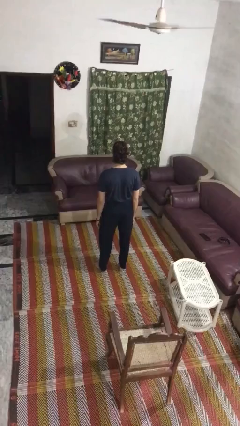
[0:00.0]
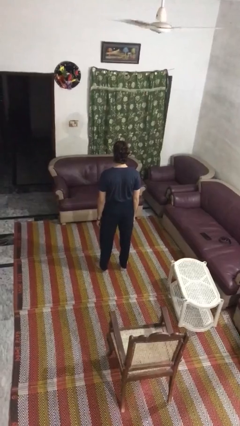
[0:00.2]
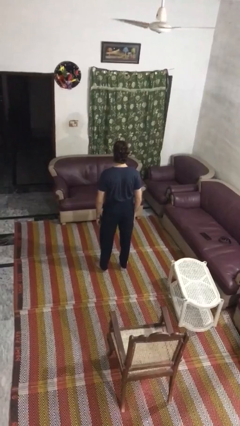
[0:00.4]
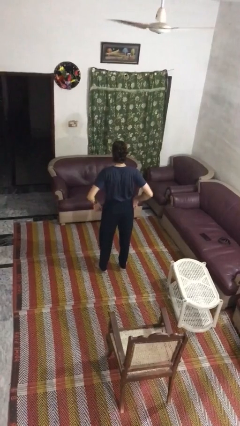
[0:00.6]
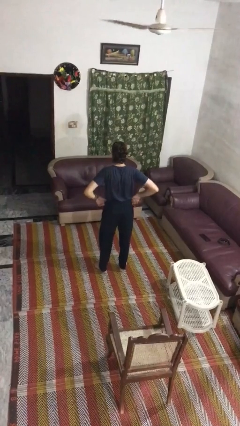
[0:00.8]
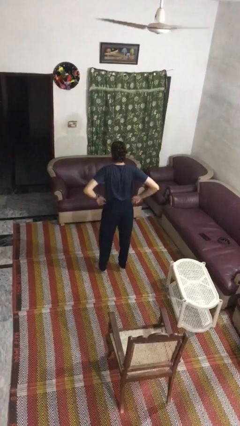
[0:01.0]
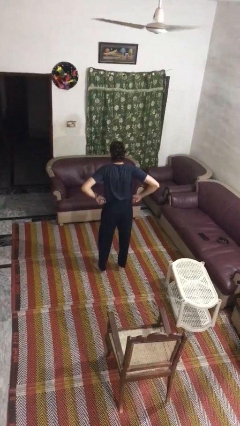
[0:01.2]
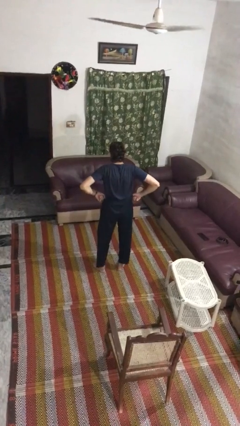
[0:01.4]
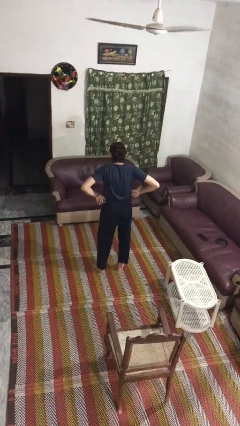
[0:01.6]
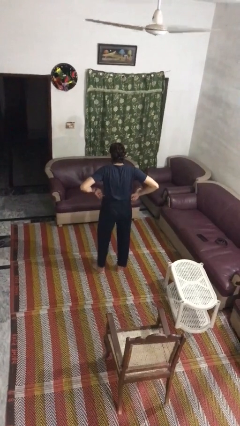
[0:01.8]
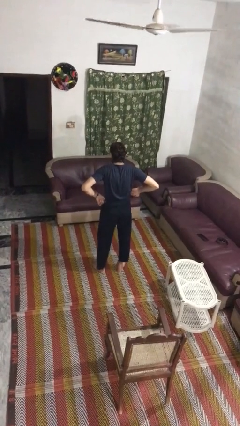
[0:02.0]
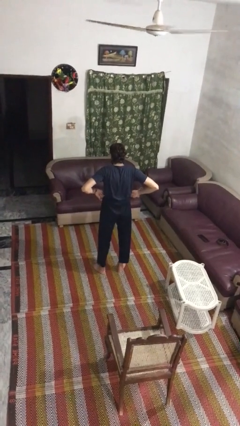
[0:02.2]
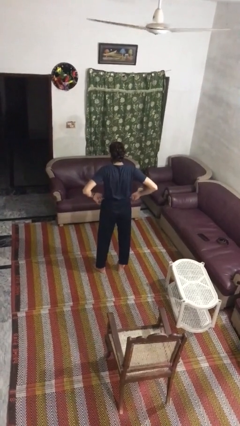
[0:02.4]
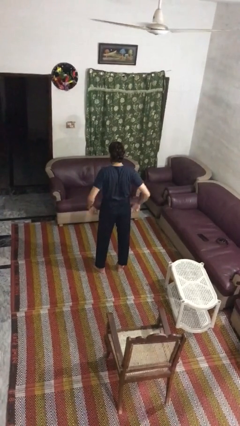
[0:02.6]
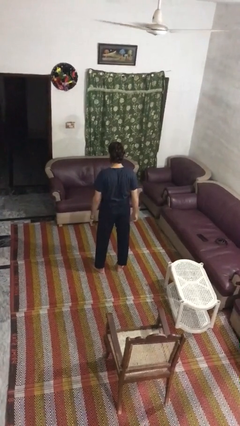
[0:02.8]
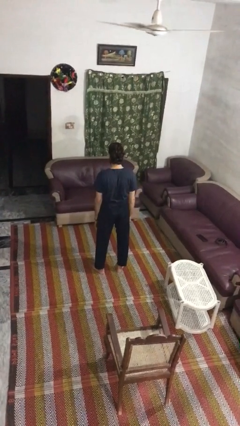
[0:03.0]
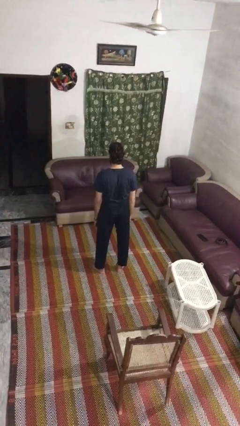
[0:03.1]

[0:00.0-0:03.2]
person hikes up pants

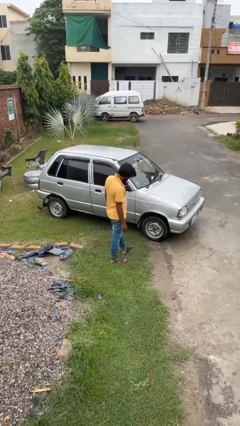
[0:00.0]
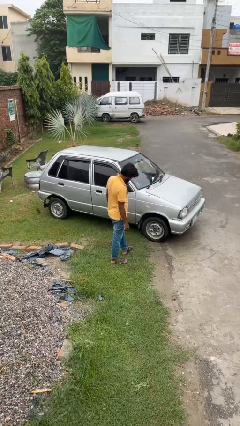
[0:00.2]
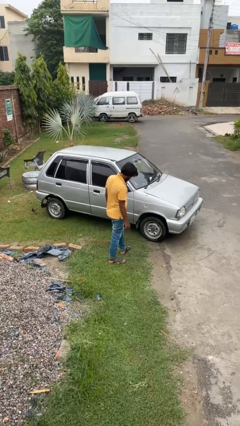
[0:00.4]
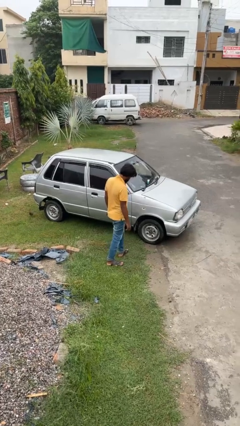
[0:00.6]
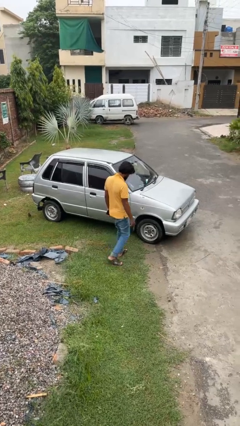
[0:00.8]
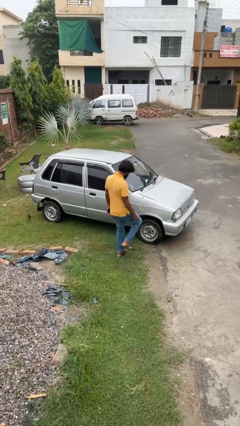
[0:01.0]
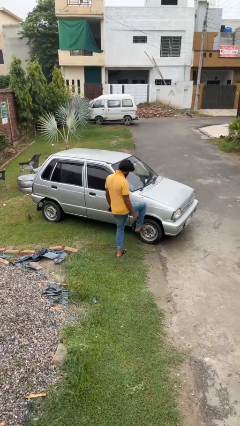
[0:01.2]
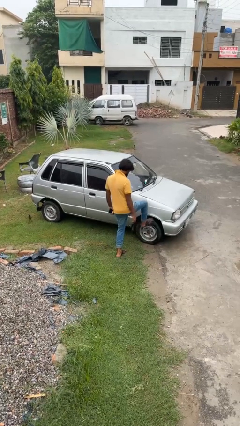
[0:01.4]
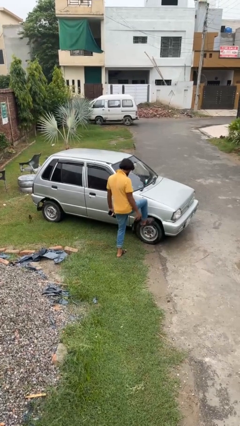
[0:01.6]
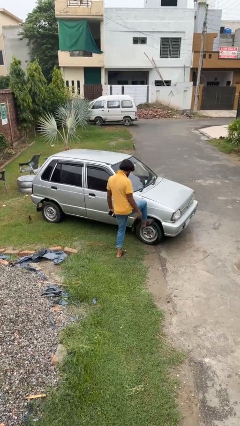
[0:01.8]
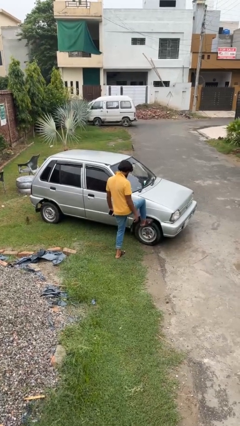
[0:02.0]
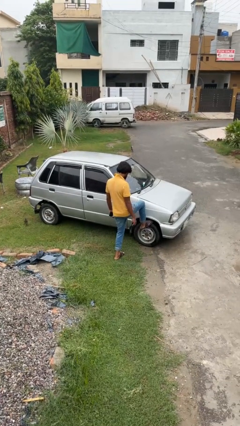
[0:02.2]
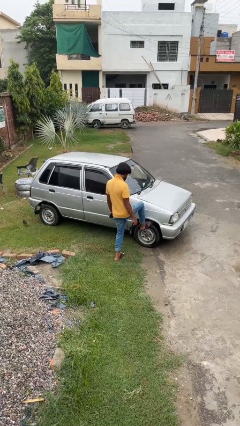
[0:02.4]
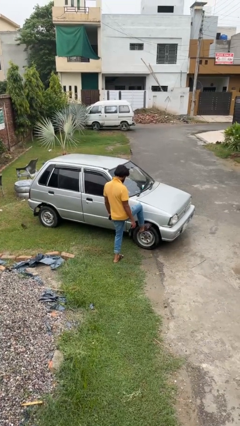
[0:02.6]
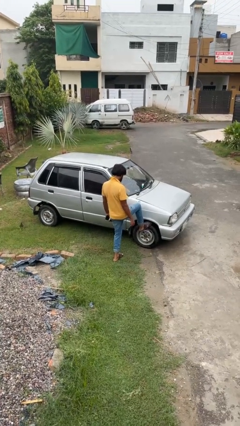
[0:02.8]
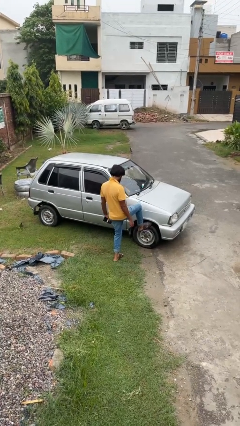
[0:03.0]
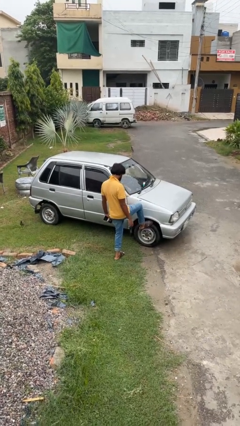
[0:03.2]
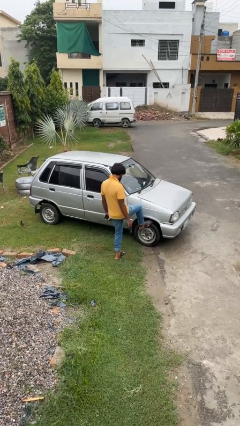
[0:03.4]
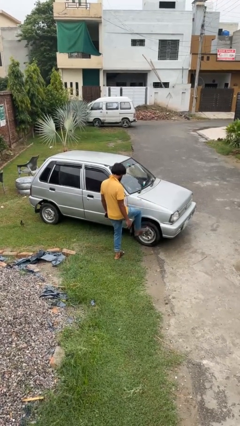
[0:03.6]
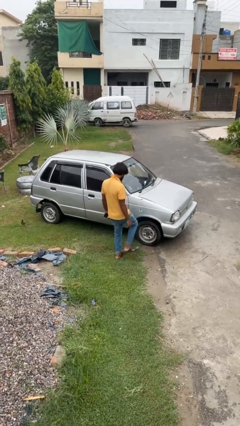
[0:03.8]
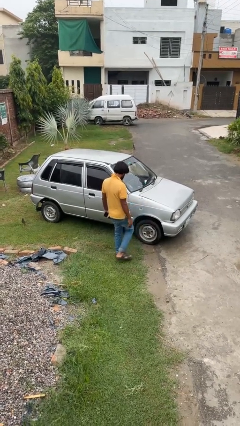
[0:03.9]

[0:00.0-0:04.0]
person kicks car tires

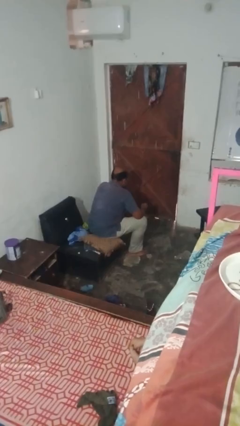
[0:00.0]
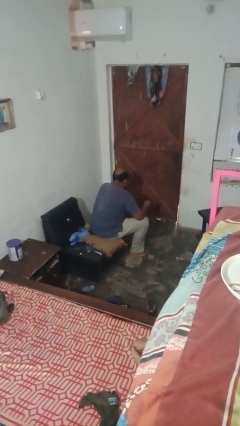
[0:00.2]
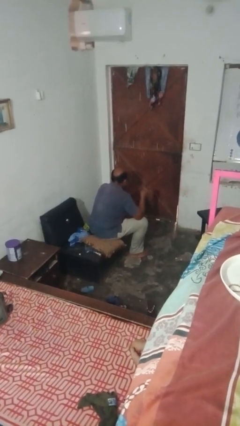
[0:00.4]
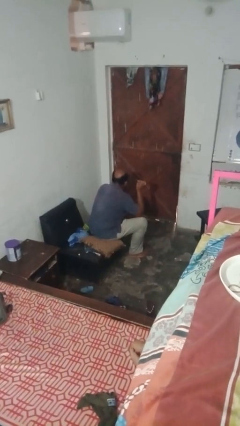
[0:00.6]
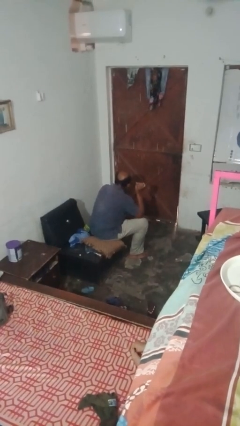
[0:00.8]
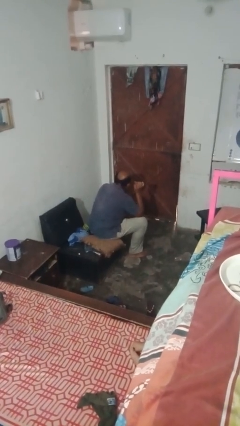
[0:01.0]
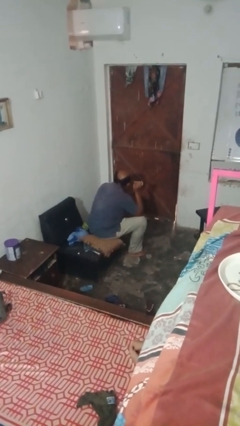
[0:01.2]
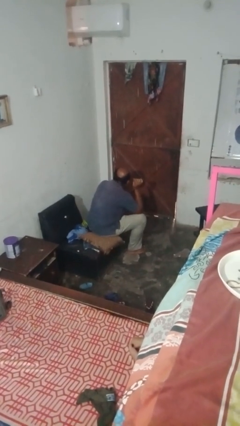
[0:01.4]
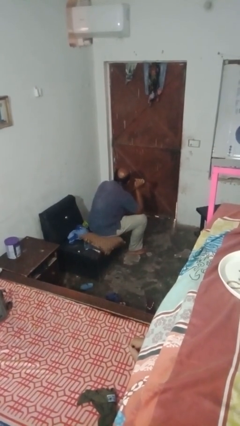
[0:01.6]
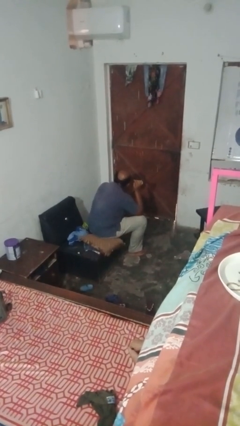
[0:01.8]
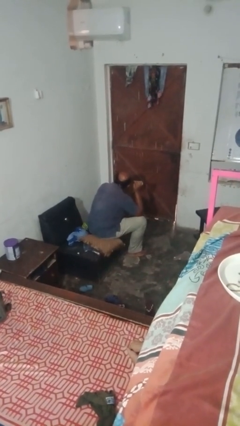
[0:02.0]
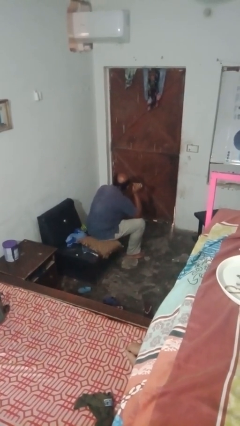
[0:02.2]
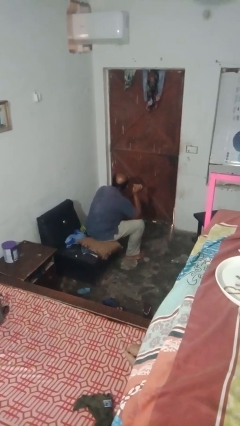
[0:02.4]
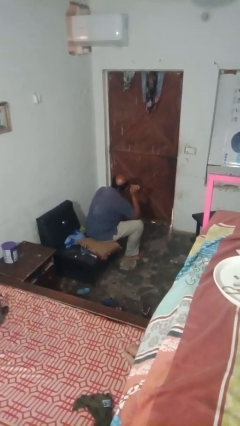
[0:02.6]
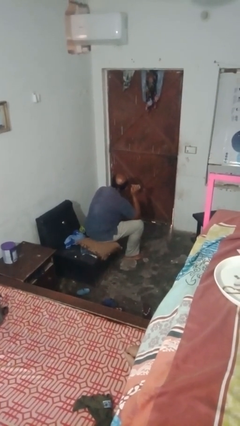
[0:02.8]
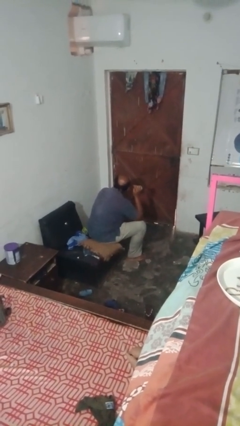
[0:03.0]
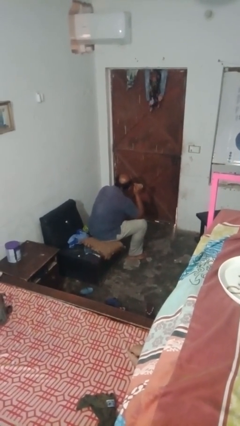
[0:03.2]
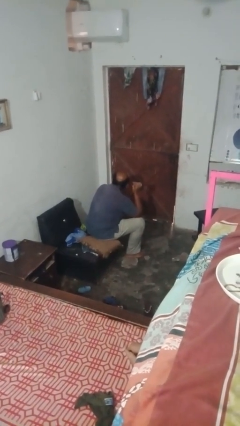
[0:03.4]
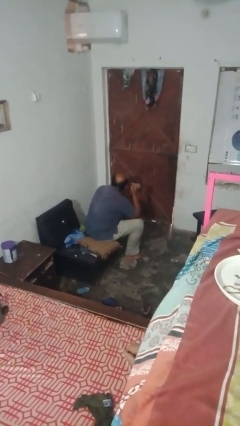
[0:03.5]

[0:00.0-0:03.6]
person applies eye makeup

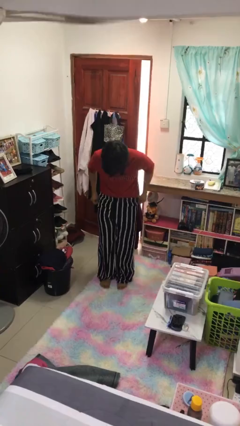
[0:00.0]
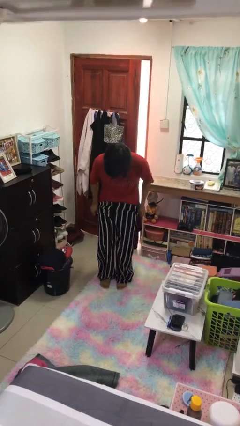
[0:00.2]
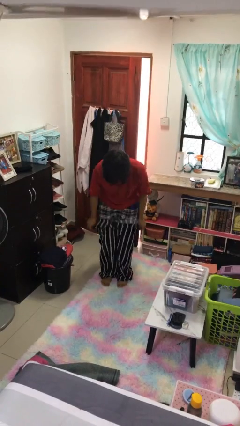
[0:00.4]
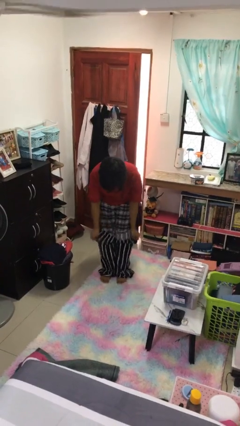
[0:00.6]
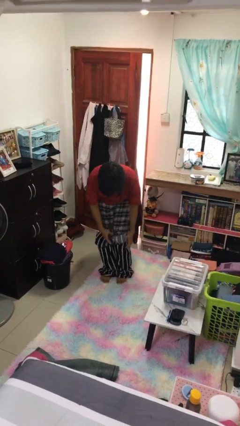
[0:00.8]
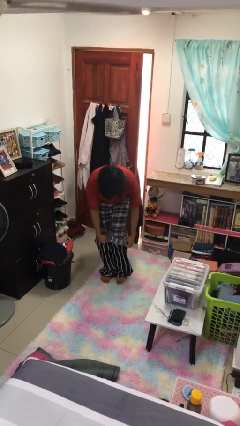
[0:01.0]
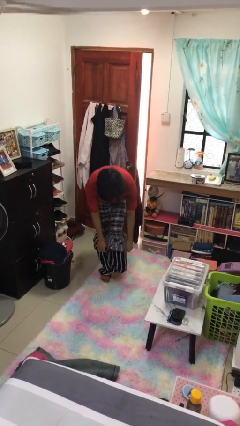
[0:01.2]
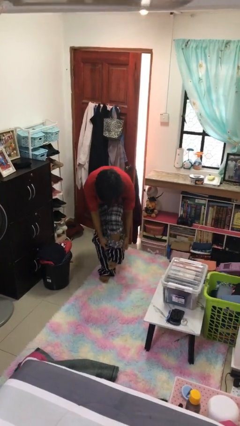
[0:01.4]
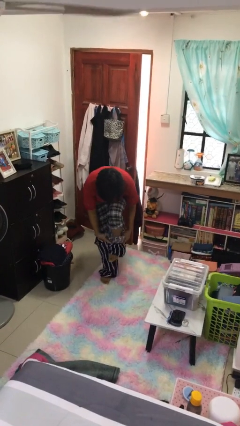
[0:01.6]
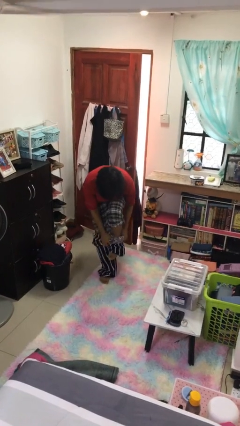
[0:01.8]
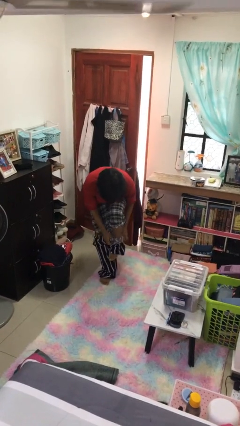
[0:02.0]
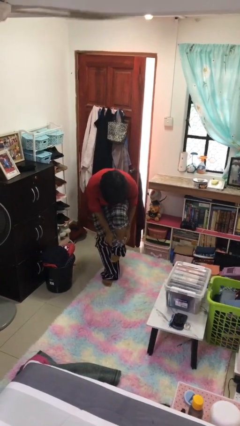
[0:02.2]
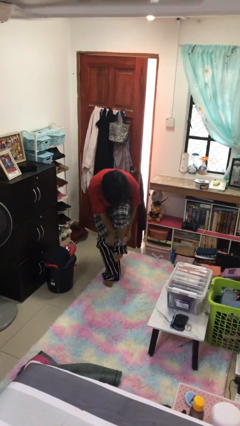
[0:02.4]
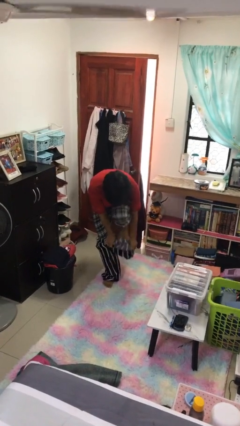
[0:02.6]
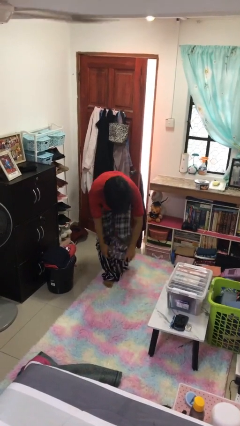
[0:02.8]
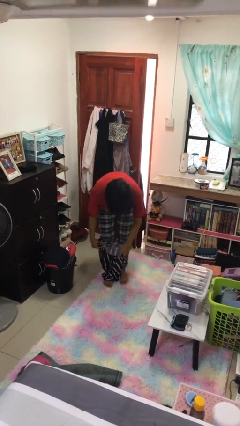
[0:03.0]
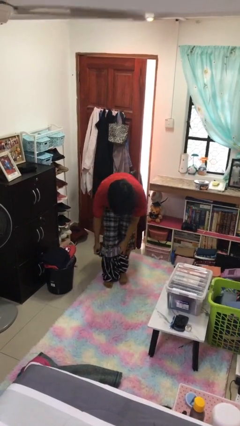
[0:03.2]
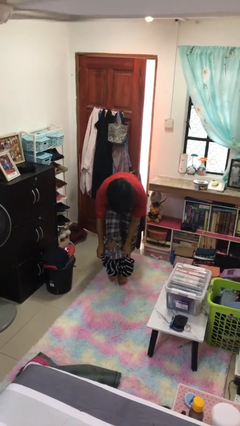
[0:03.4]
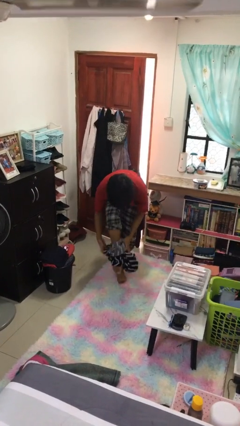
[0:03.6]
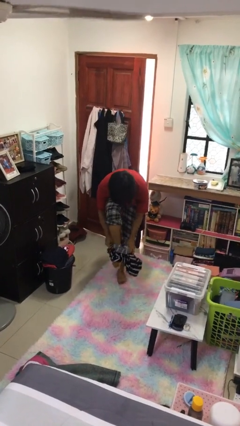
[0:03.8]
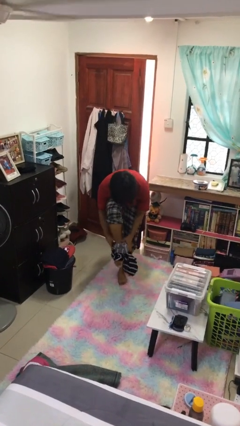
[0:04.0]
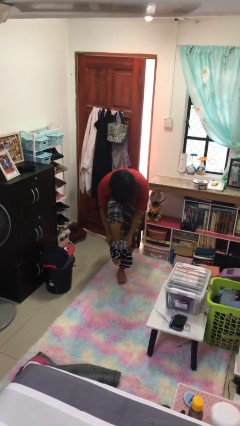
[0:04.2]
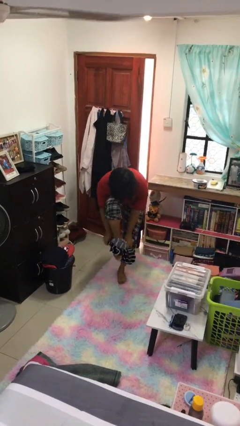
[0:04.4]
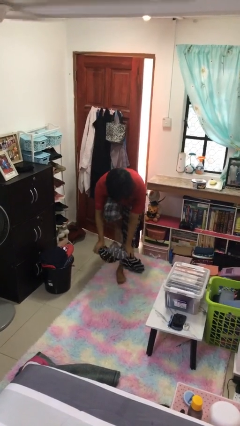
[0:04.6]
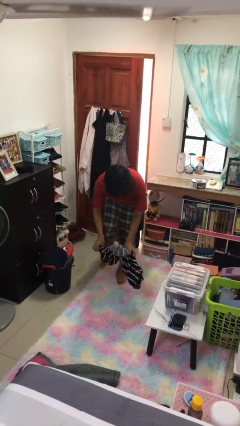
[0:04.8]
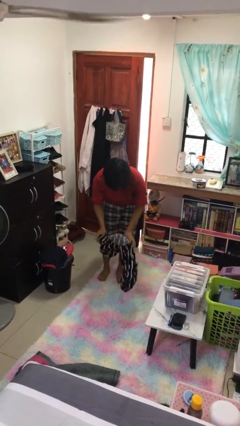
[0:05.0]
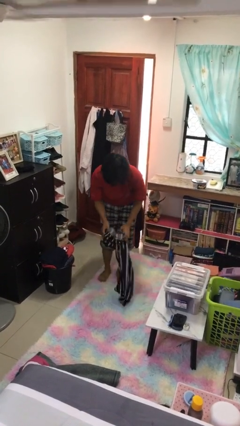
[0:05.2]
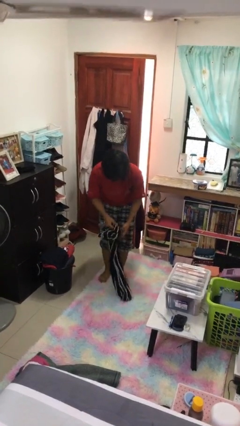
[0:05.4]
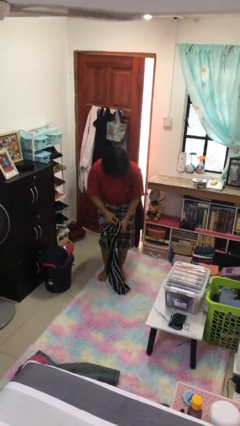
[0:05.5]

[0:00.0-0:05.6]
person takes off pants

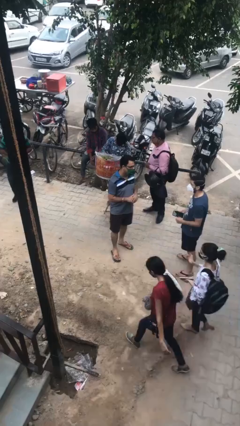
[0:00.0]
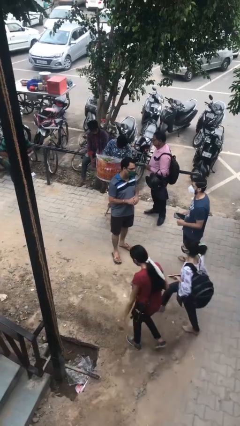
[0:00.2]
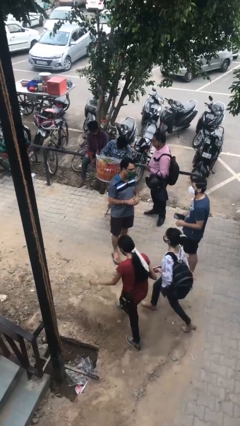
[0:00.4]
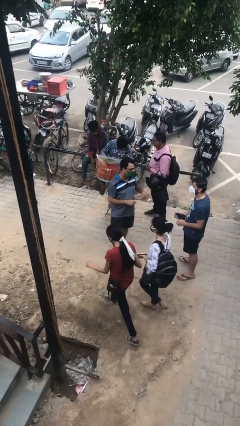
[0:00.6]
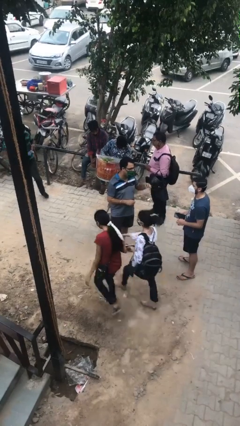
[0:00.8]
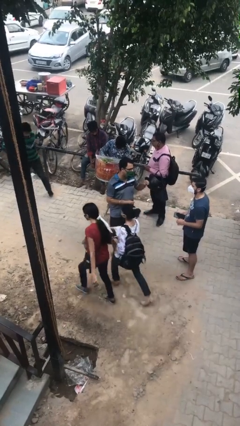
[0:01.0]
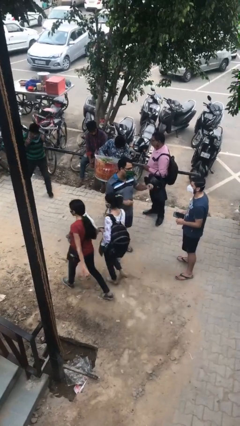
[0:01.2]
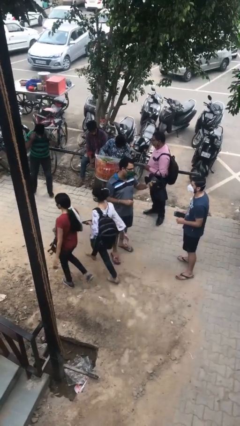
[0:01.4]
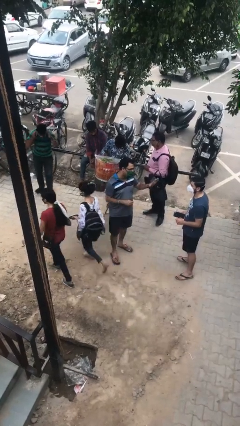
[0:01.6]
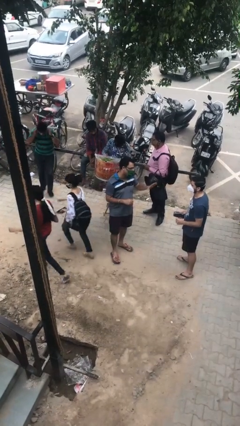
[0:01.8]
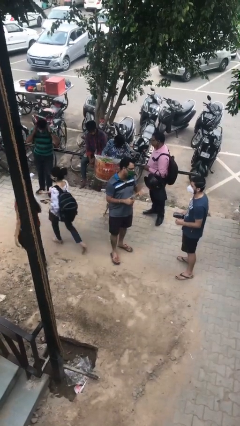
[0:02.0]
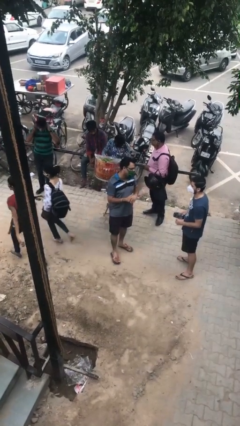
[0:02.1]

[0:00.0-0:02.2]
person talks to person
